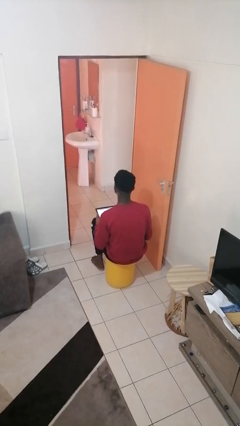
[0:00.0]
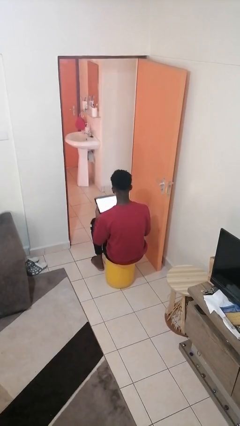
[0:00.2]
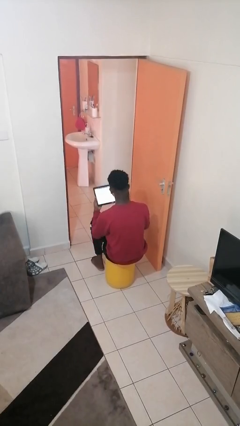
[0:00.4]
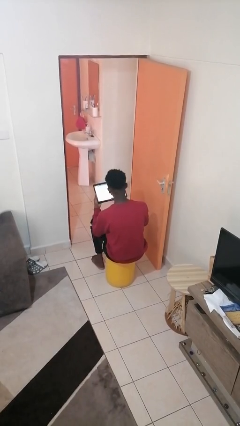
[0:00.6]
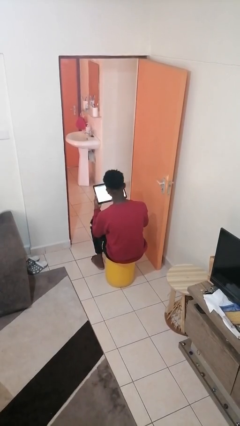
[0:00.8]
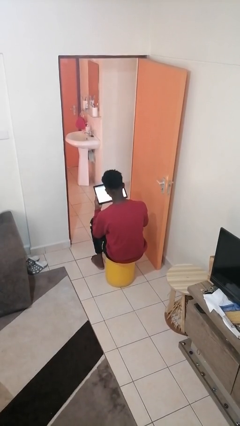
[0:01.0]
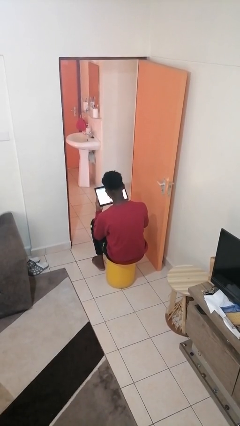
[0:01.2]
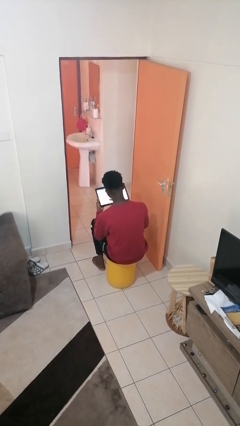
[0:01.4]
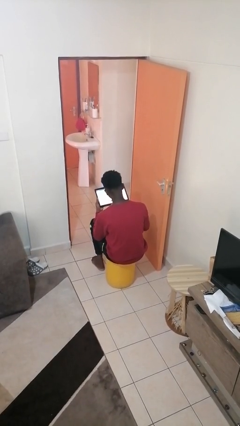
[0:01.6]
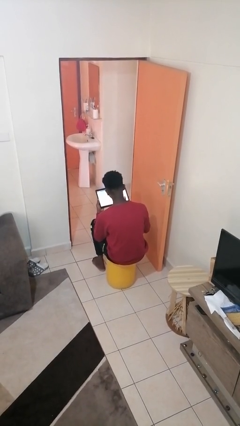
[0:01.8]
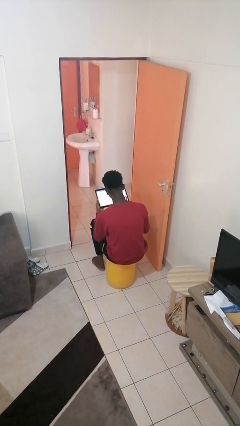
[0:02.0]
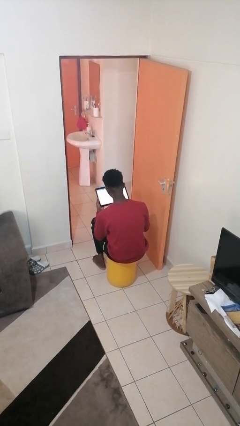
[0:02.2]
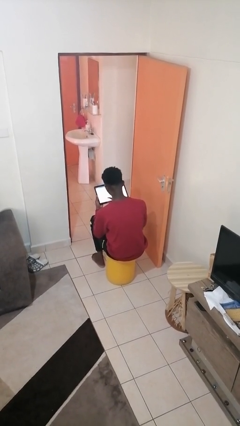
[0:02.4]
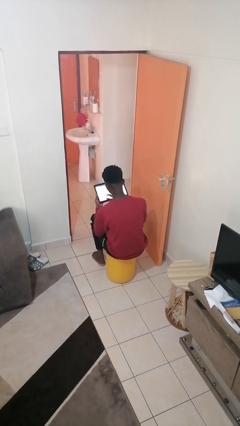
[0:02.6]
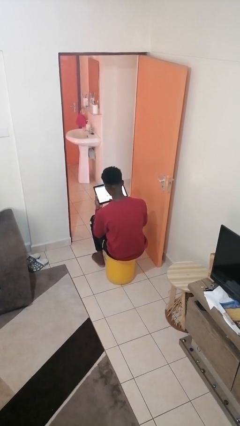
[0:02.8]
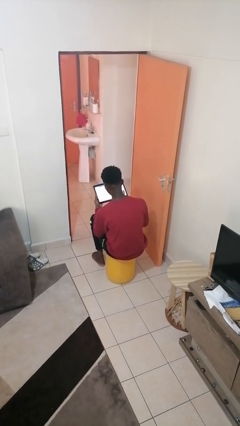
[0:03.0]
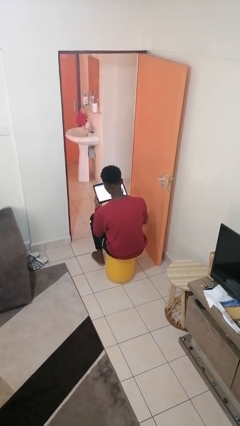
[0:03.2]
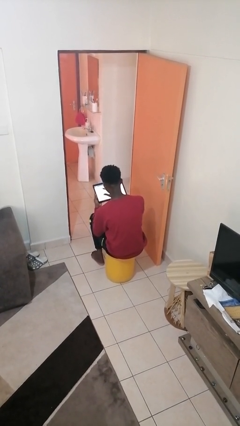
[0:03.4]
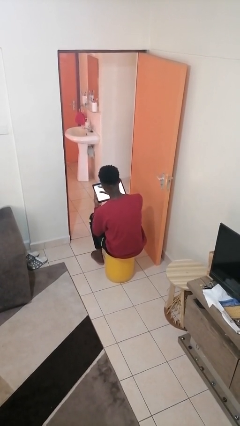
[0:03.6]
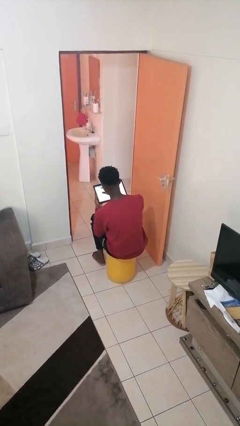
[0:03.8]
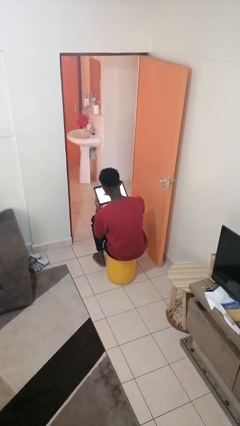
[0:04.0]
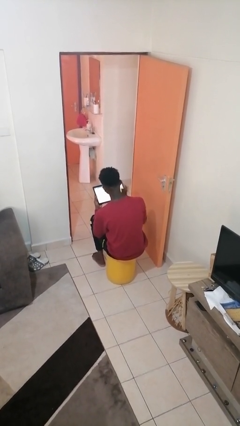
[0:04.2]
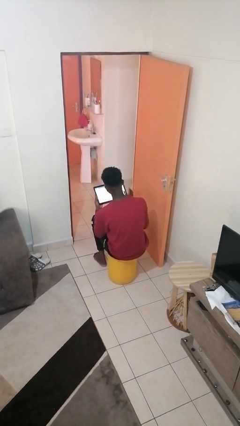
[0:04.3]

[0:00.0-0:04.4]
person interacts with tablet

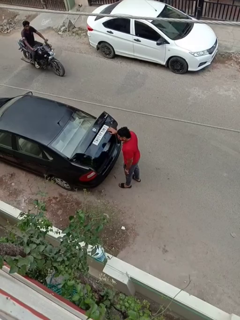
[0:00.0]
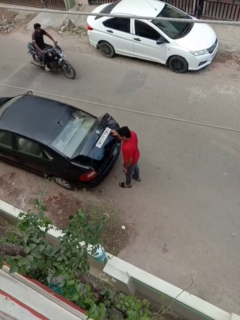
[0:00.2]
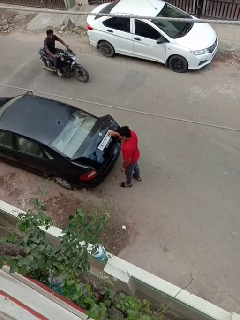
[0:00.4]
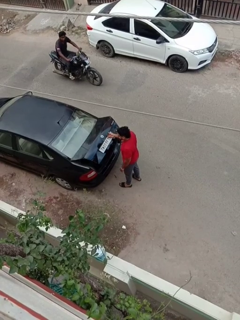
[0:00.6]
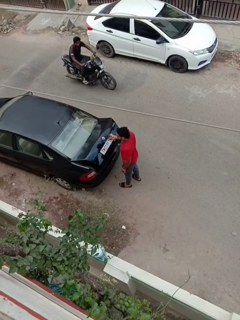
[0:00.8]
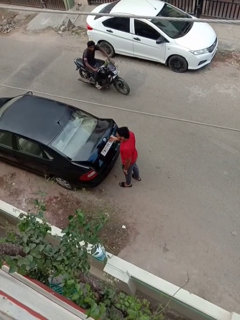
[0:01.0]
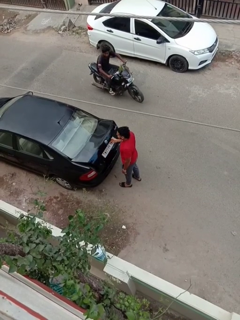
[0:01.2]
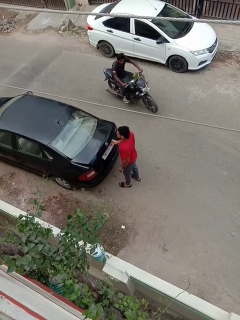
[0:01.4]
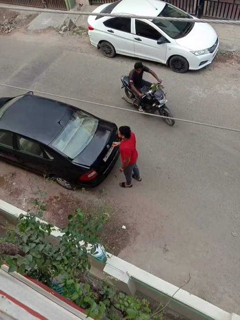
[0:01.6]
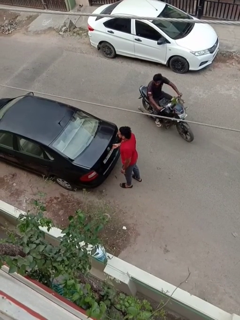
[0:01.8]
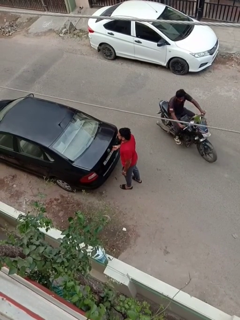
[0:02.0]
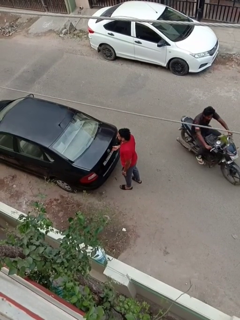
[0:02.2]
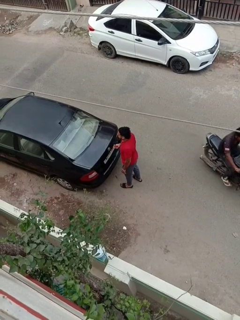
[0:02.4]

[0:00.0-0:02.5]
person closes car trunk

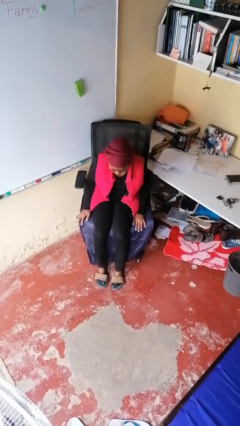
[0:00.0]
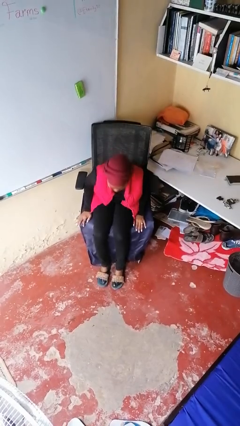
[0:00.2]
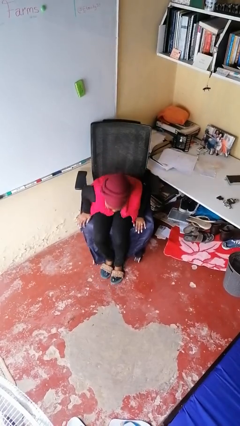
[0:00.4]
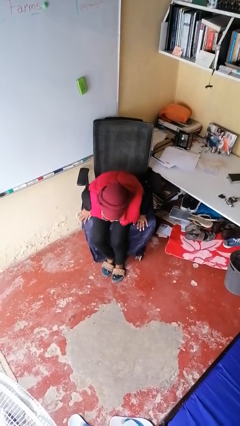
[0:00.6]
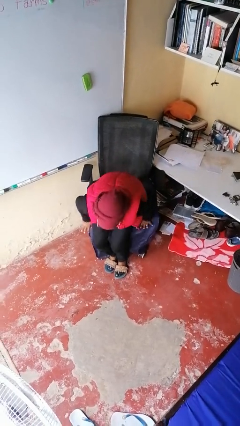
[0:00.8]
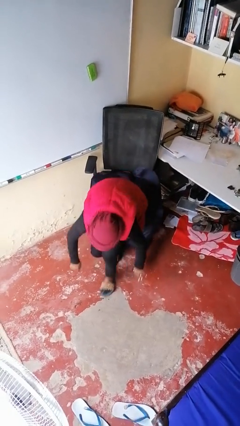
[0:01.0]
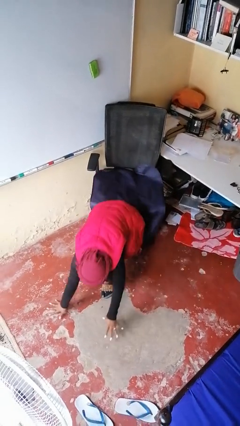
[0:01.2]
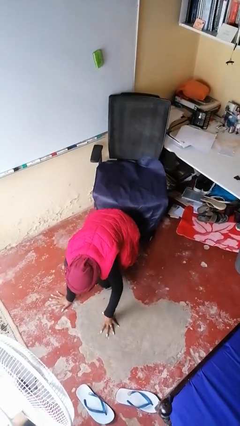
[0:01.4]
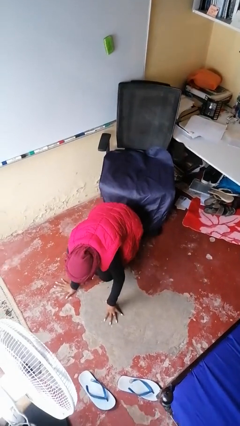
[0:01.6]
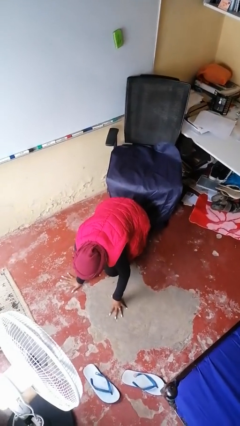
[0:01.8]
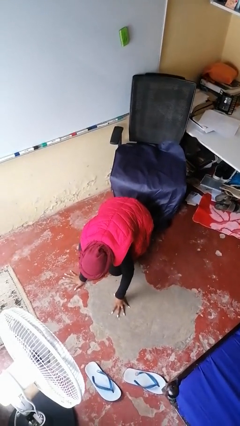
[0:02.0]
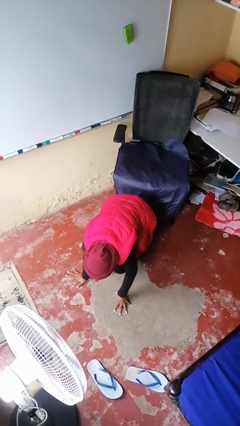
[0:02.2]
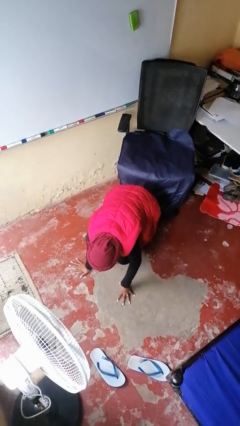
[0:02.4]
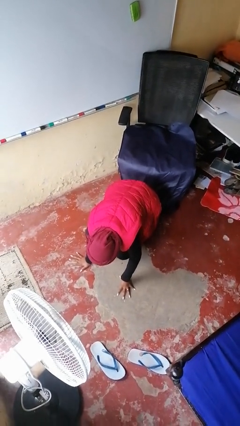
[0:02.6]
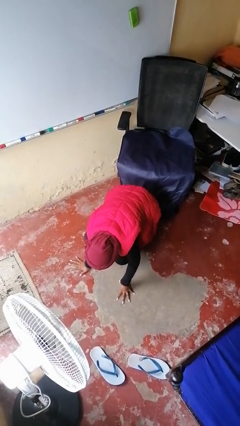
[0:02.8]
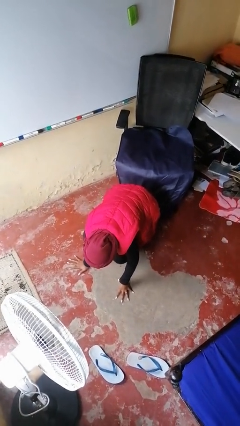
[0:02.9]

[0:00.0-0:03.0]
person falls from chair

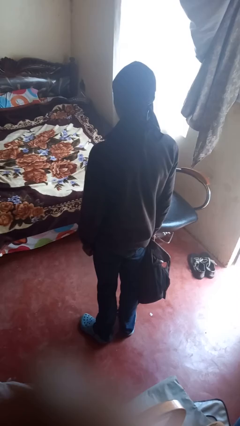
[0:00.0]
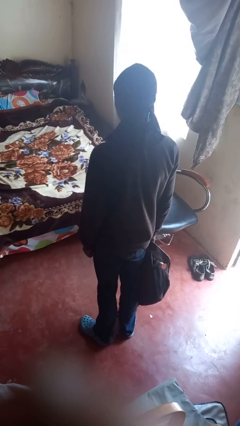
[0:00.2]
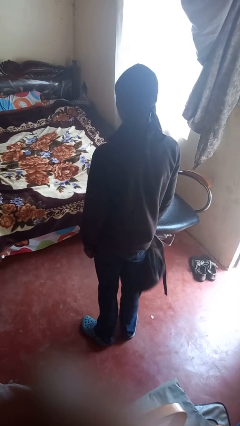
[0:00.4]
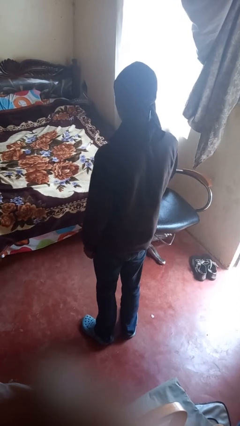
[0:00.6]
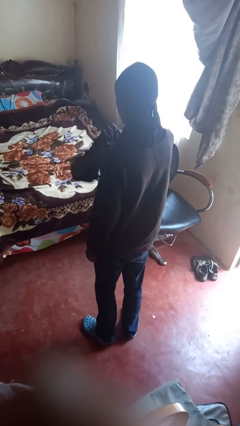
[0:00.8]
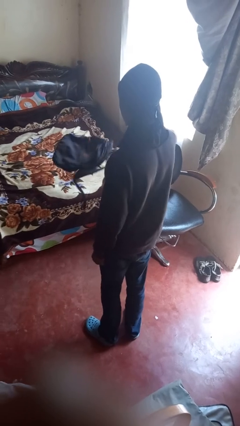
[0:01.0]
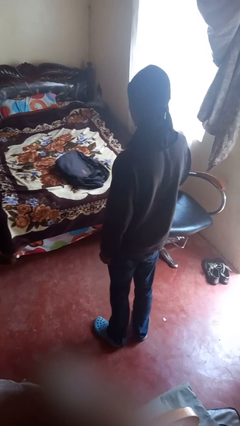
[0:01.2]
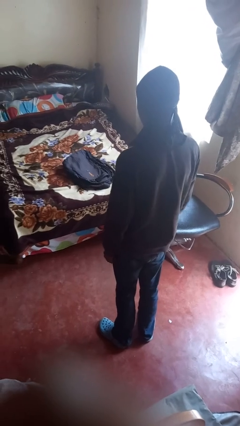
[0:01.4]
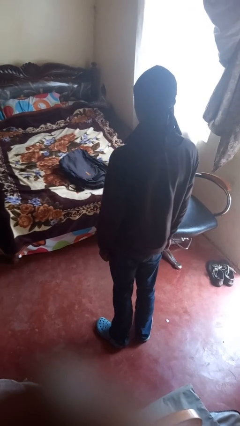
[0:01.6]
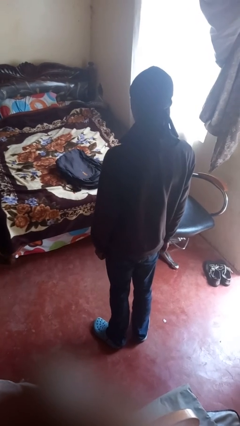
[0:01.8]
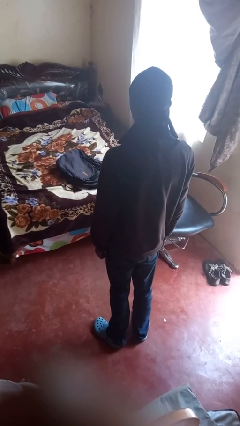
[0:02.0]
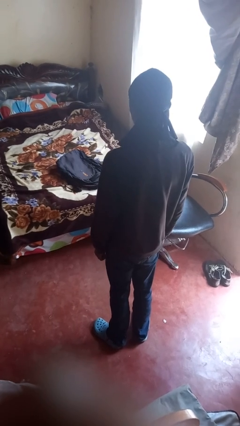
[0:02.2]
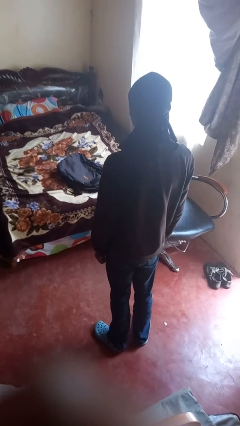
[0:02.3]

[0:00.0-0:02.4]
person throws object on bed

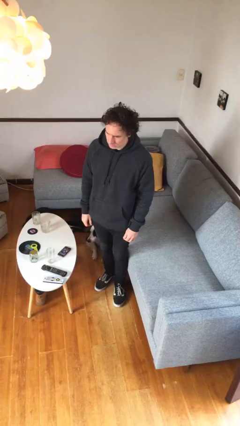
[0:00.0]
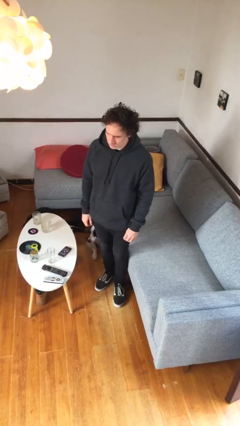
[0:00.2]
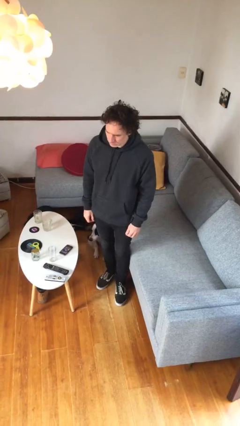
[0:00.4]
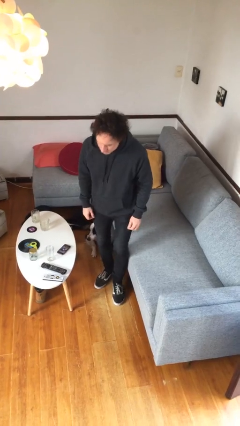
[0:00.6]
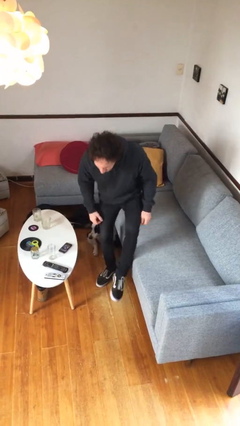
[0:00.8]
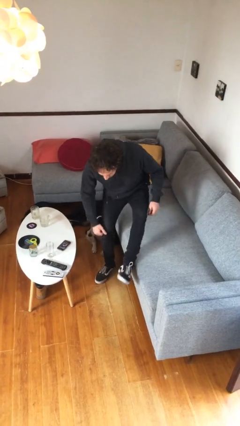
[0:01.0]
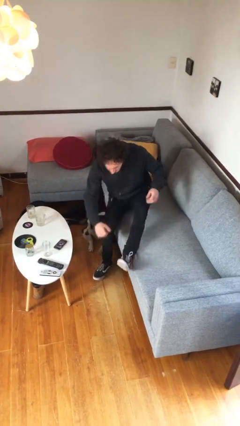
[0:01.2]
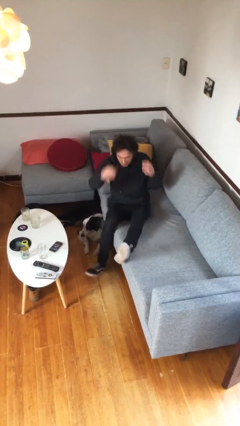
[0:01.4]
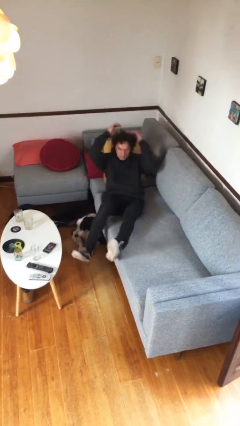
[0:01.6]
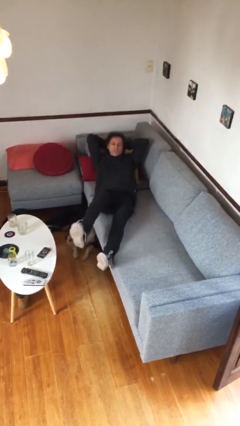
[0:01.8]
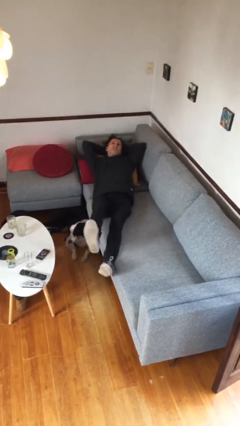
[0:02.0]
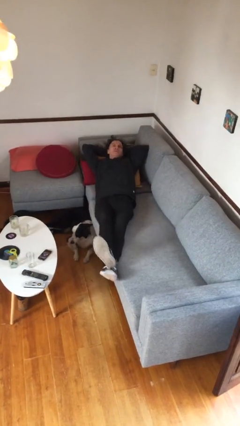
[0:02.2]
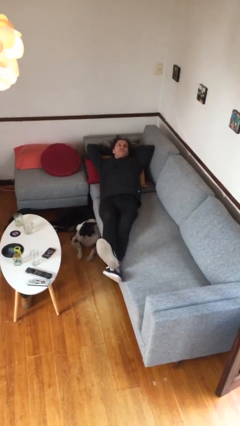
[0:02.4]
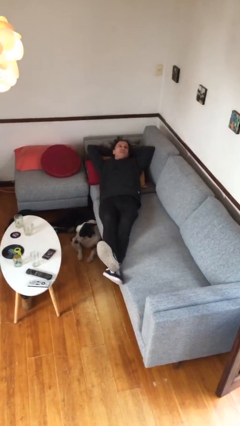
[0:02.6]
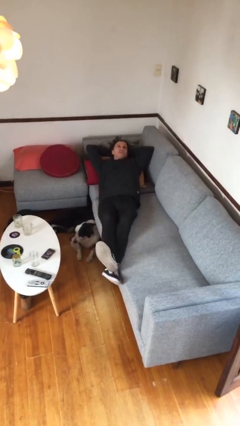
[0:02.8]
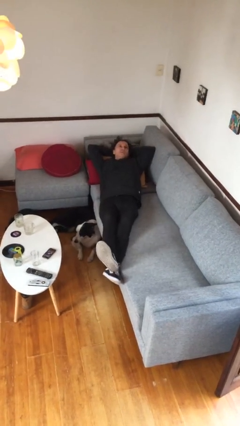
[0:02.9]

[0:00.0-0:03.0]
person lies down on couch

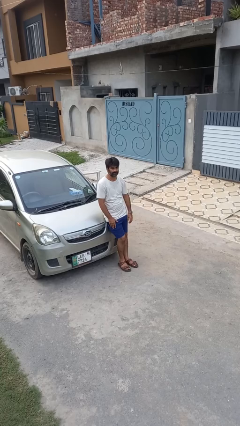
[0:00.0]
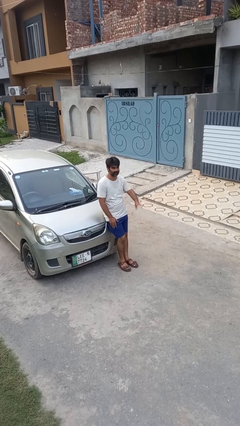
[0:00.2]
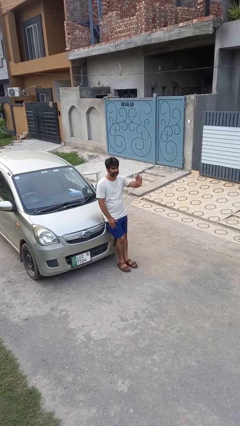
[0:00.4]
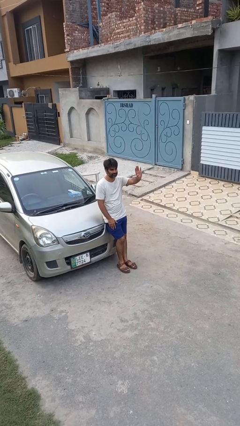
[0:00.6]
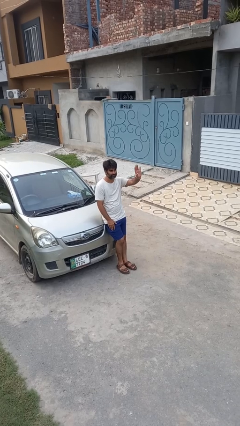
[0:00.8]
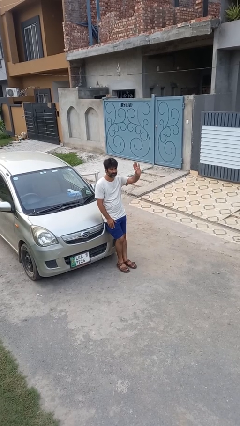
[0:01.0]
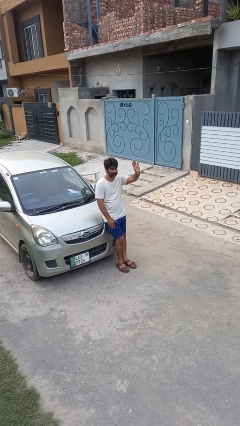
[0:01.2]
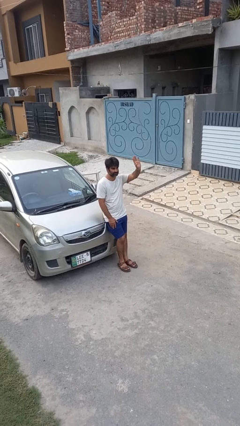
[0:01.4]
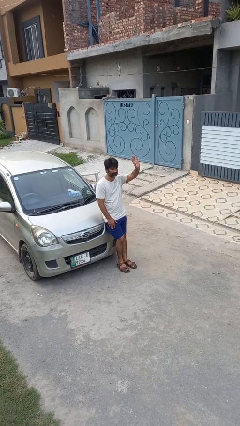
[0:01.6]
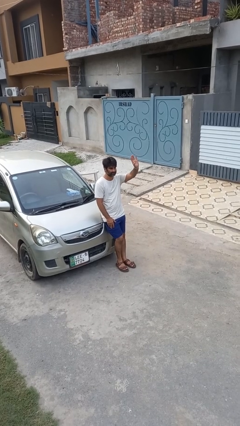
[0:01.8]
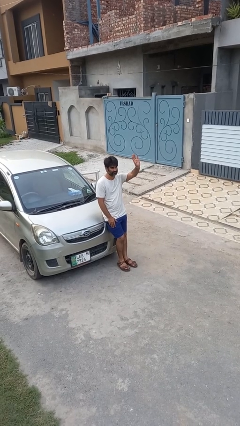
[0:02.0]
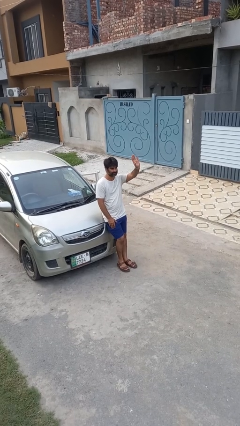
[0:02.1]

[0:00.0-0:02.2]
person gestures raise hand

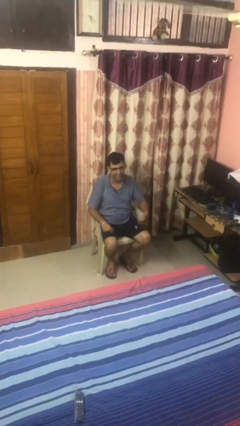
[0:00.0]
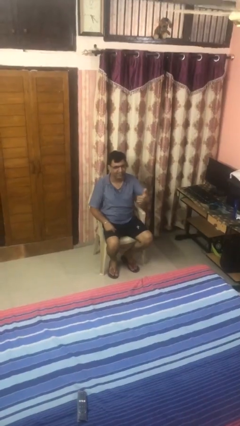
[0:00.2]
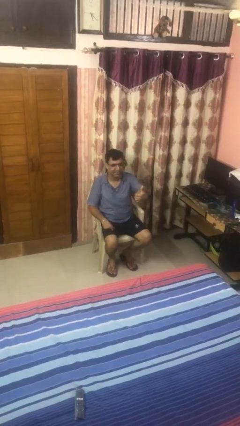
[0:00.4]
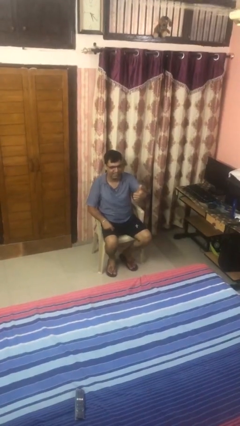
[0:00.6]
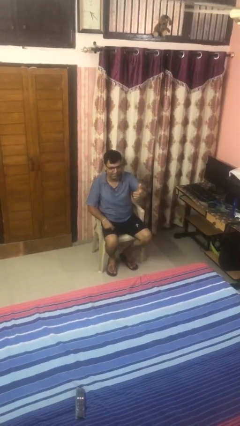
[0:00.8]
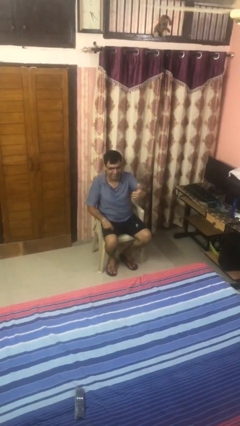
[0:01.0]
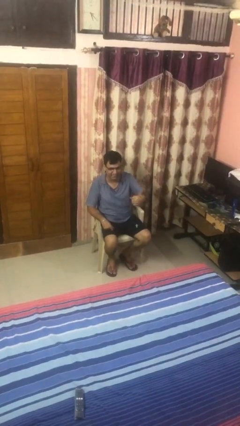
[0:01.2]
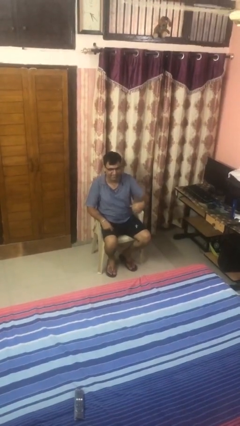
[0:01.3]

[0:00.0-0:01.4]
person gestures thumbs up
